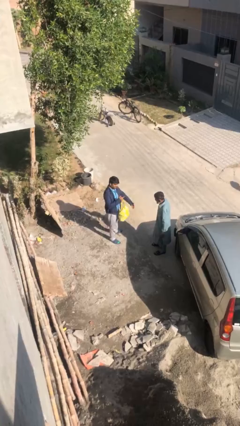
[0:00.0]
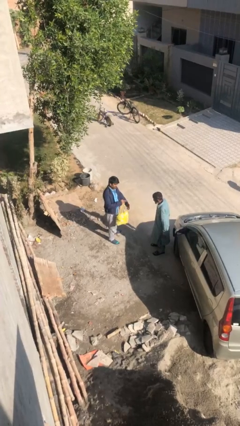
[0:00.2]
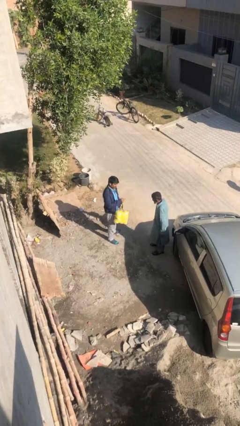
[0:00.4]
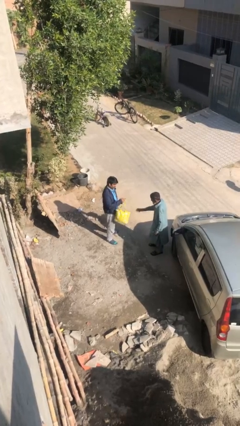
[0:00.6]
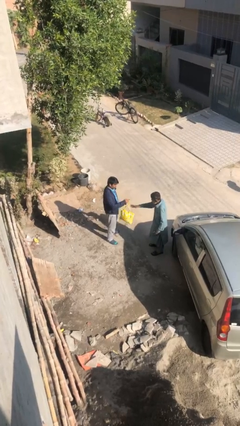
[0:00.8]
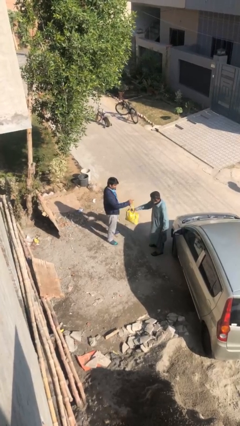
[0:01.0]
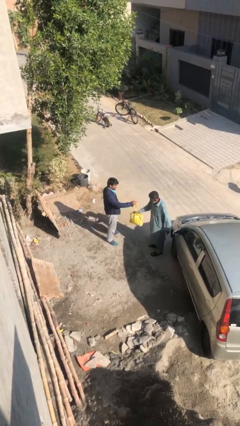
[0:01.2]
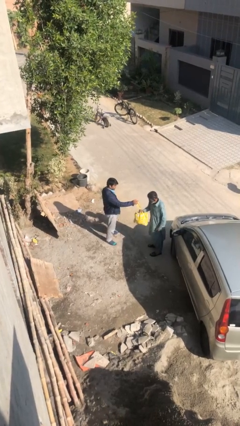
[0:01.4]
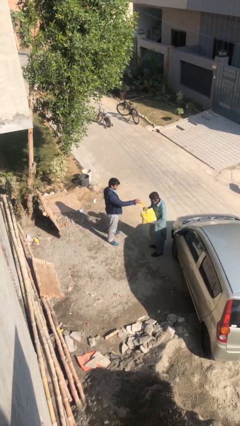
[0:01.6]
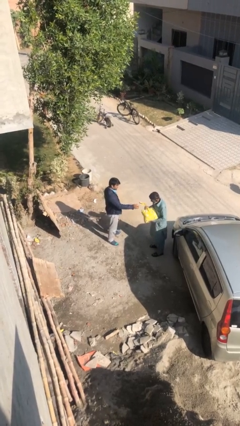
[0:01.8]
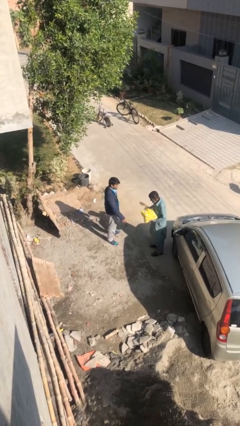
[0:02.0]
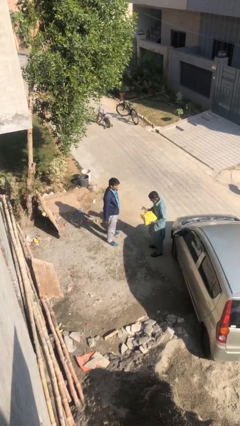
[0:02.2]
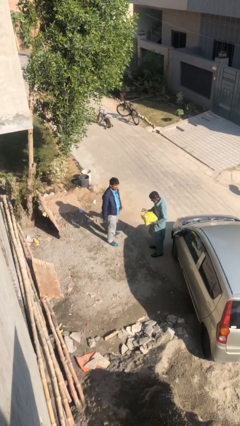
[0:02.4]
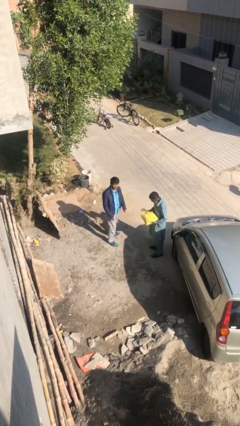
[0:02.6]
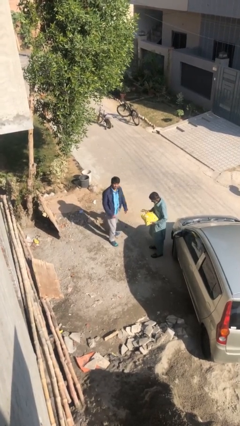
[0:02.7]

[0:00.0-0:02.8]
person transfers object to person

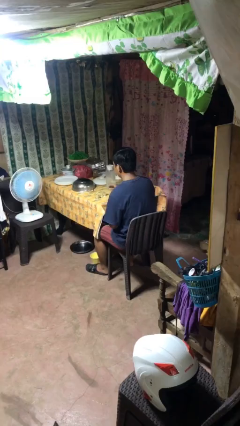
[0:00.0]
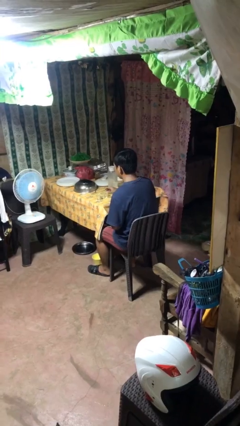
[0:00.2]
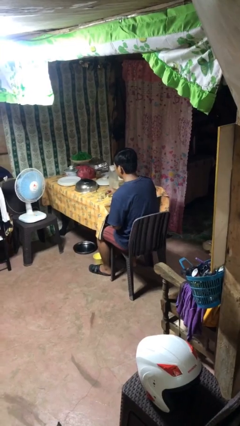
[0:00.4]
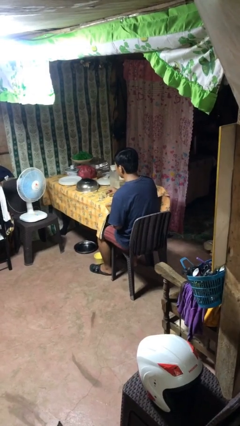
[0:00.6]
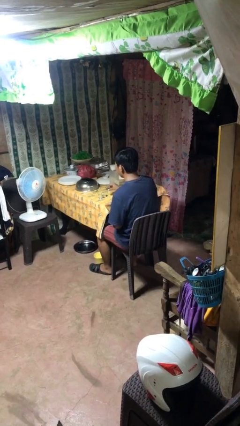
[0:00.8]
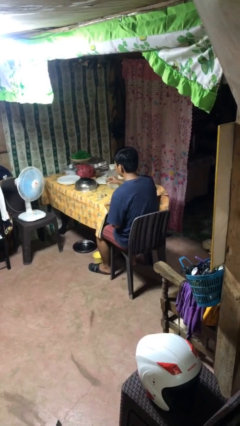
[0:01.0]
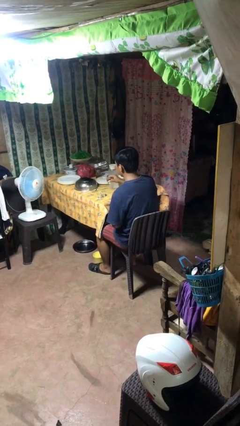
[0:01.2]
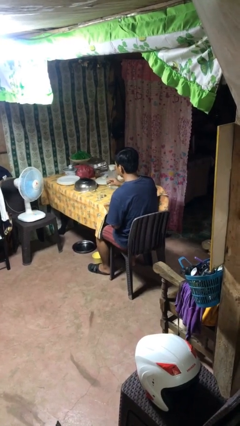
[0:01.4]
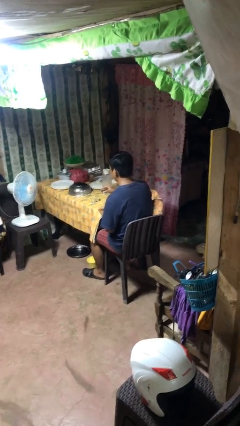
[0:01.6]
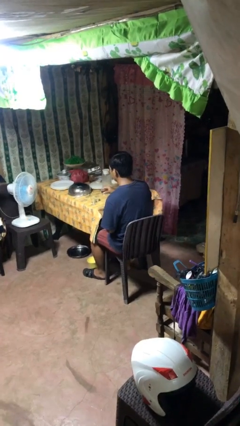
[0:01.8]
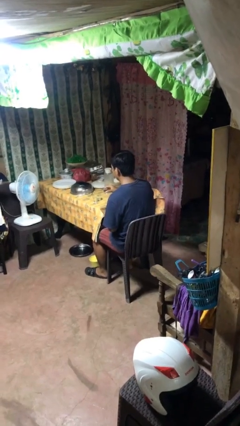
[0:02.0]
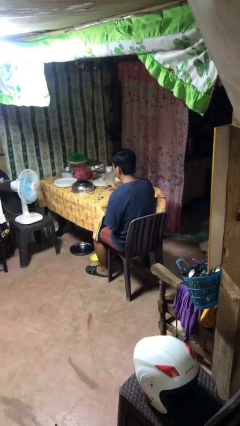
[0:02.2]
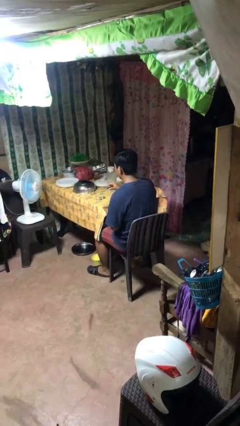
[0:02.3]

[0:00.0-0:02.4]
person picks up object from table

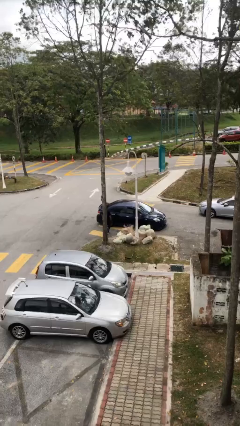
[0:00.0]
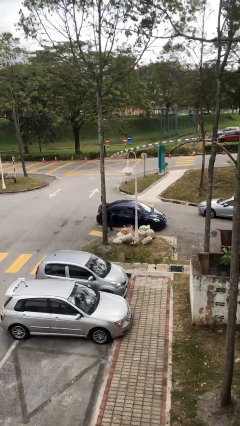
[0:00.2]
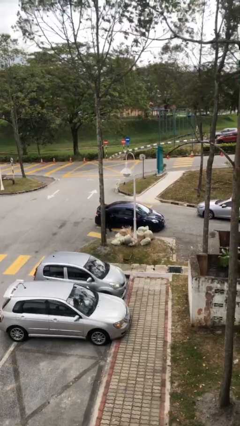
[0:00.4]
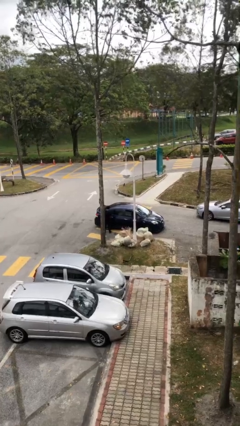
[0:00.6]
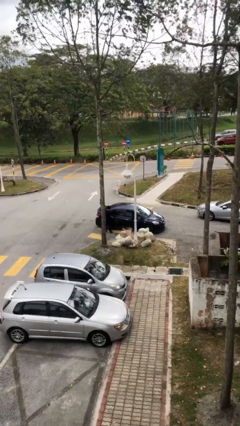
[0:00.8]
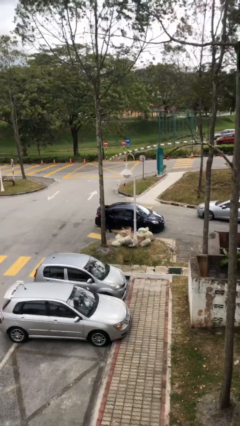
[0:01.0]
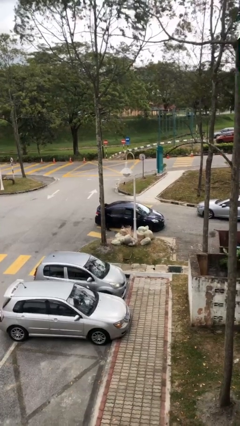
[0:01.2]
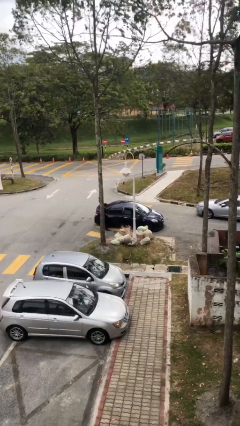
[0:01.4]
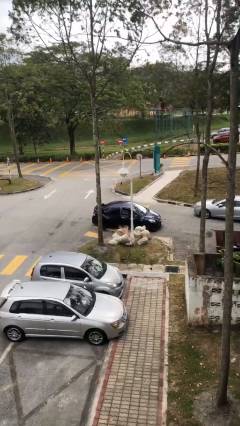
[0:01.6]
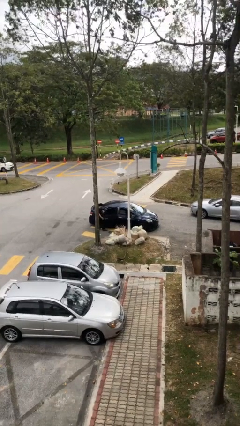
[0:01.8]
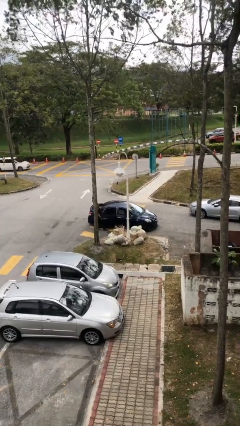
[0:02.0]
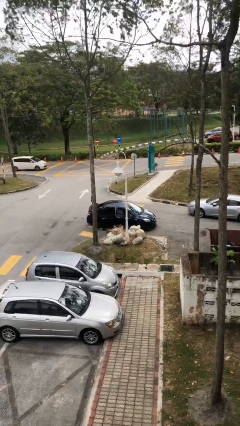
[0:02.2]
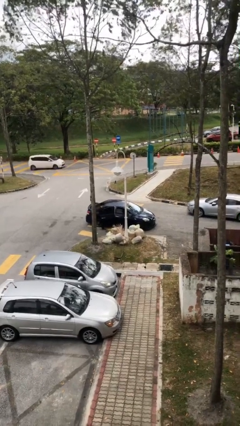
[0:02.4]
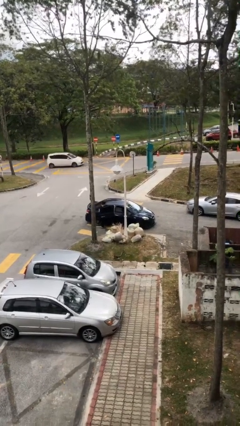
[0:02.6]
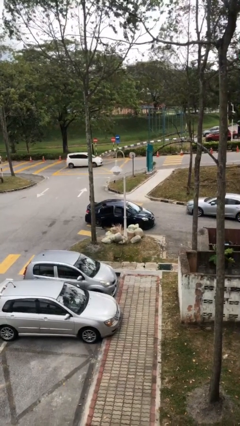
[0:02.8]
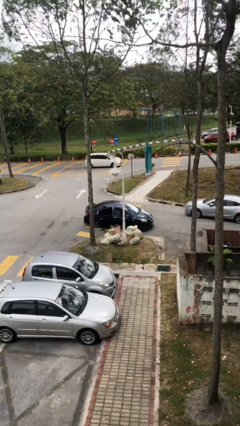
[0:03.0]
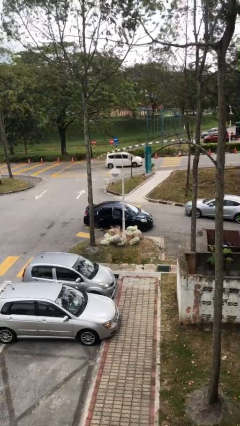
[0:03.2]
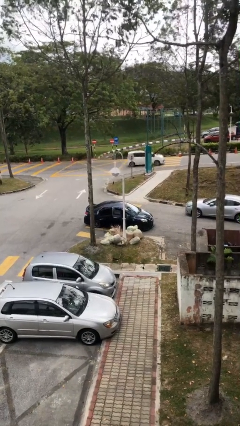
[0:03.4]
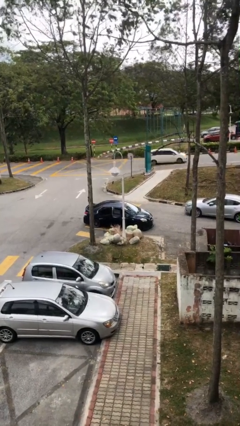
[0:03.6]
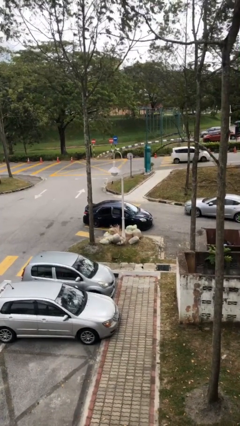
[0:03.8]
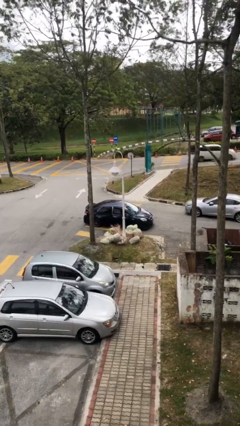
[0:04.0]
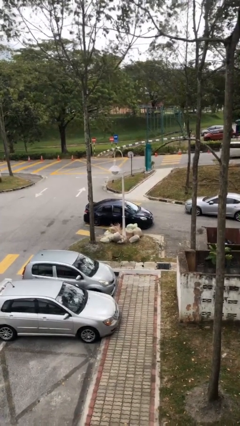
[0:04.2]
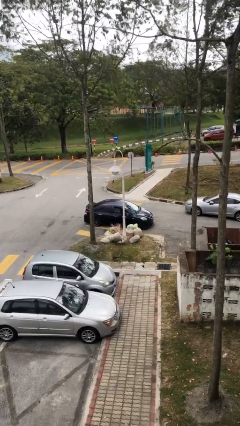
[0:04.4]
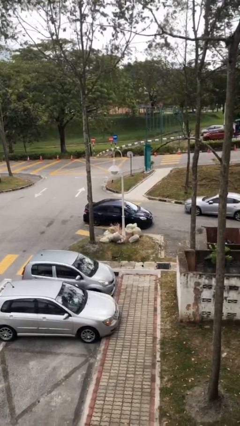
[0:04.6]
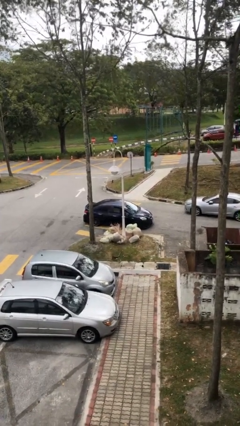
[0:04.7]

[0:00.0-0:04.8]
car picks up person

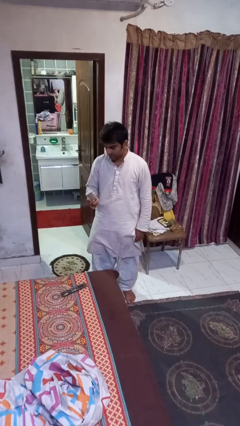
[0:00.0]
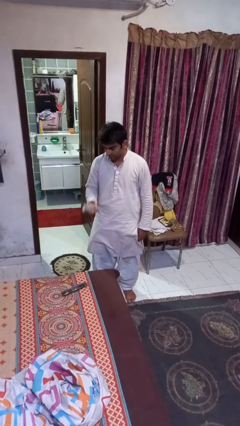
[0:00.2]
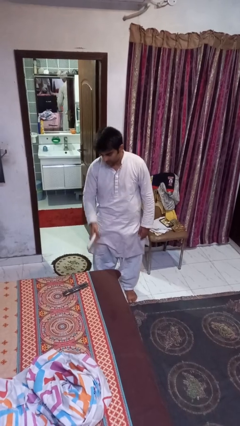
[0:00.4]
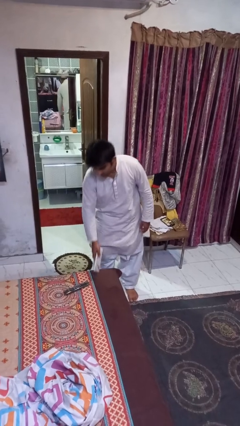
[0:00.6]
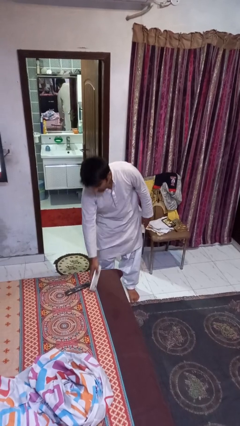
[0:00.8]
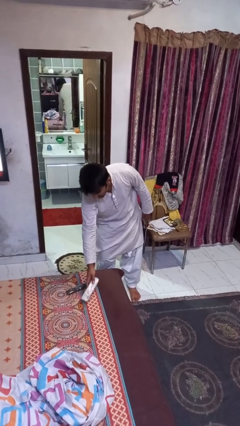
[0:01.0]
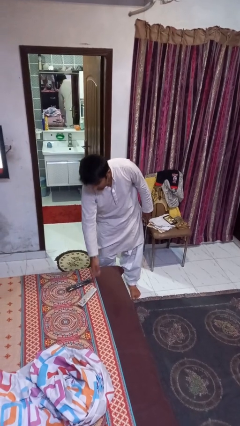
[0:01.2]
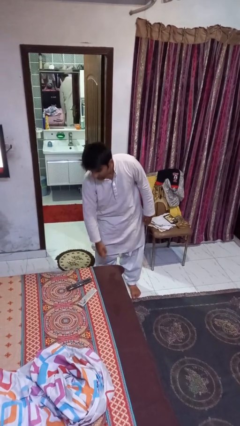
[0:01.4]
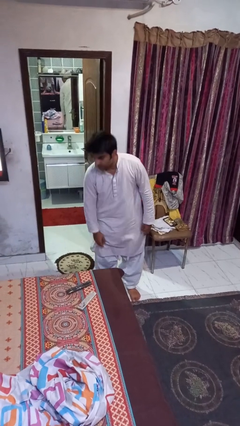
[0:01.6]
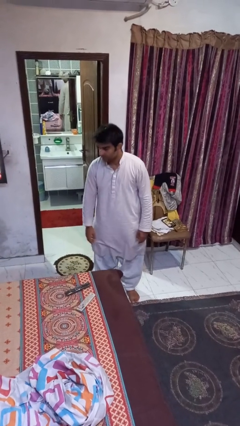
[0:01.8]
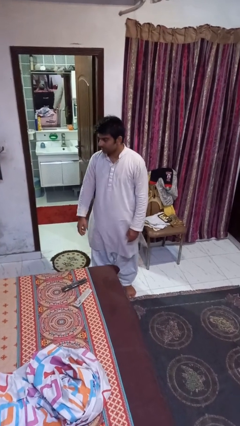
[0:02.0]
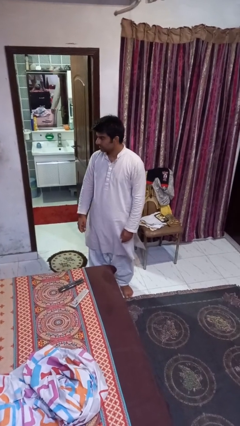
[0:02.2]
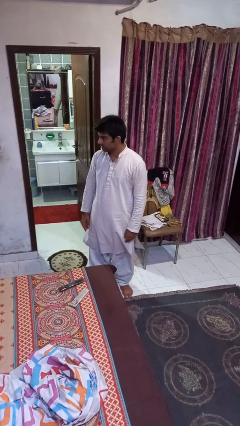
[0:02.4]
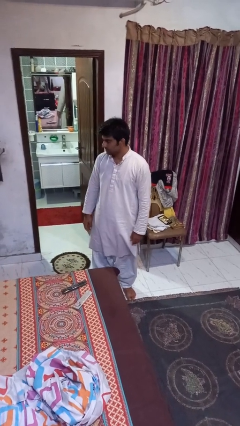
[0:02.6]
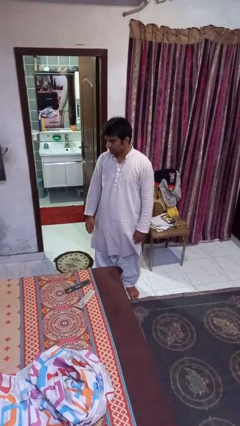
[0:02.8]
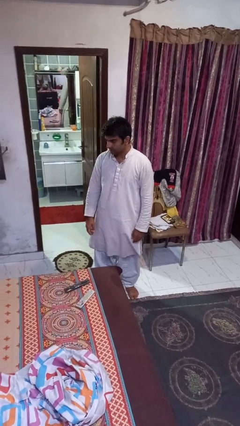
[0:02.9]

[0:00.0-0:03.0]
person puts down object on bed

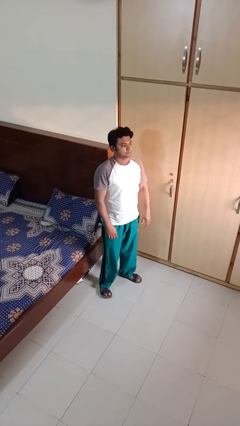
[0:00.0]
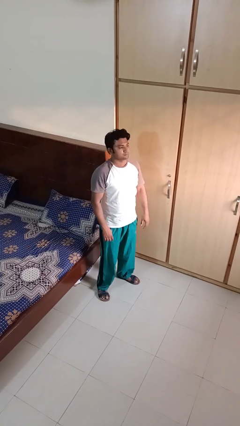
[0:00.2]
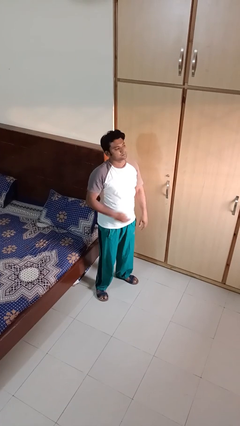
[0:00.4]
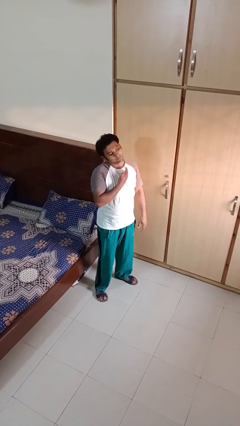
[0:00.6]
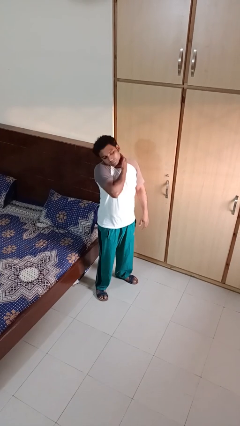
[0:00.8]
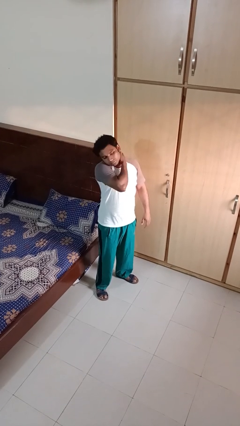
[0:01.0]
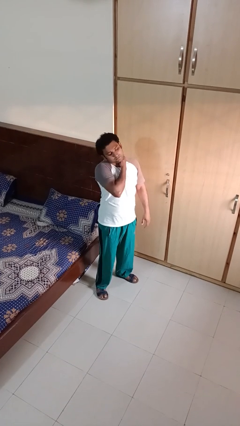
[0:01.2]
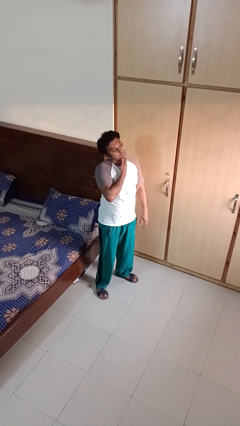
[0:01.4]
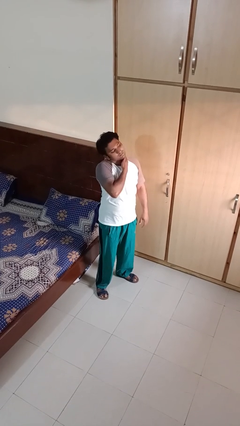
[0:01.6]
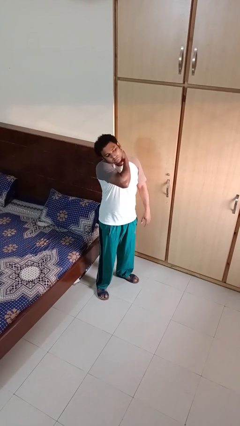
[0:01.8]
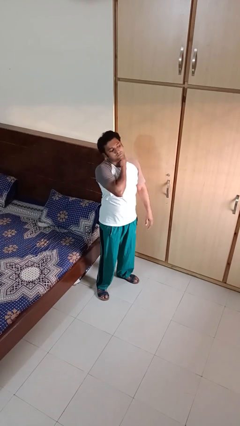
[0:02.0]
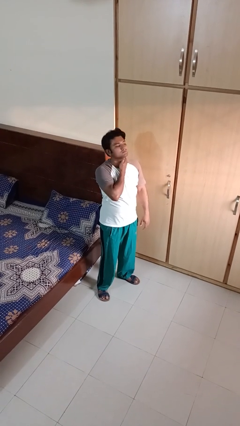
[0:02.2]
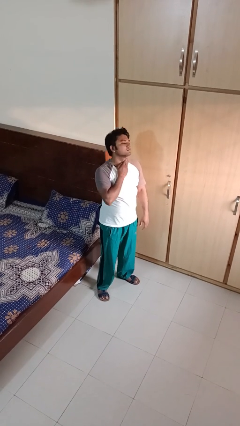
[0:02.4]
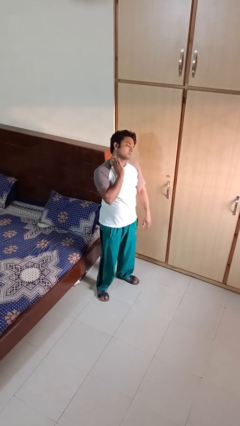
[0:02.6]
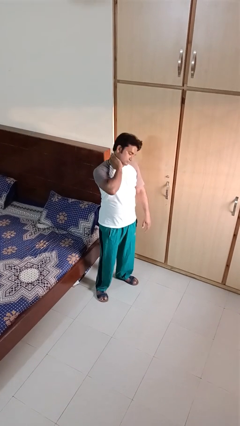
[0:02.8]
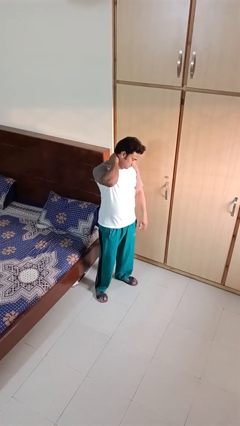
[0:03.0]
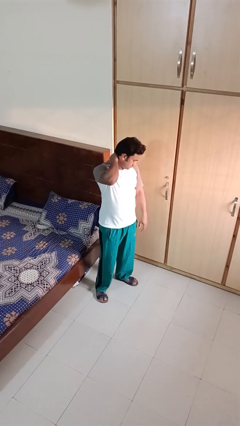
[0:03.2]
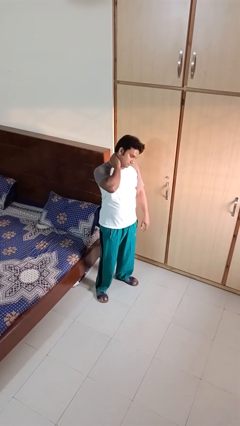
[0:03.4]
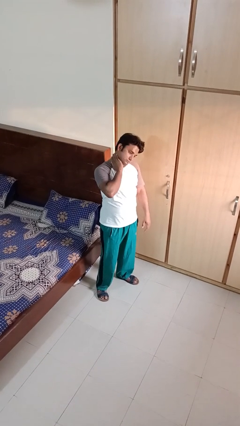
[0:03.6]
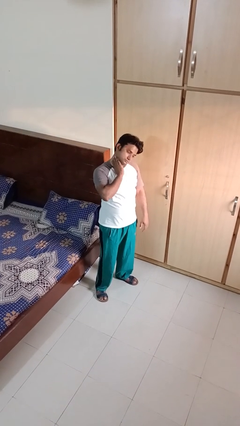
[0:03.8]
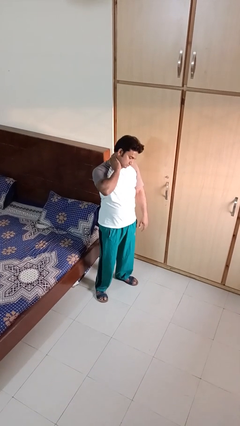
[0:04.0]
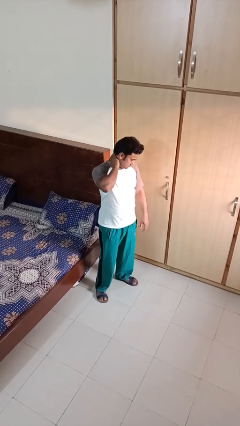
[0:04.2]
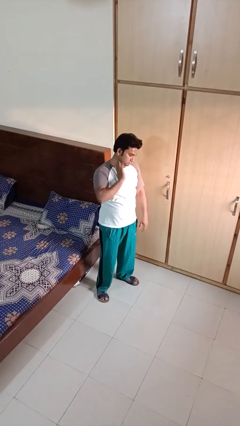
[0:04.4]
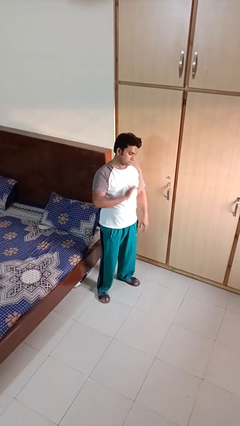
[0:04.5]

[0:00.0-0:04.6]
person rubs neck
